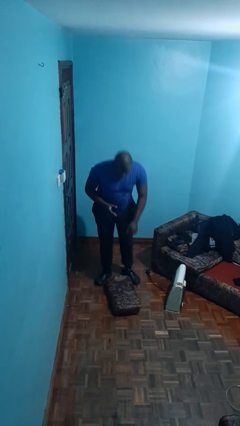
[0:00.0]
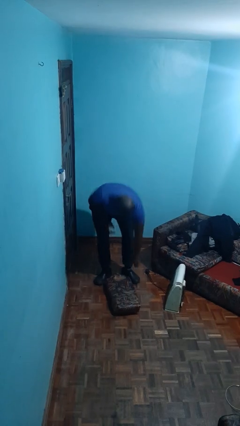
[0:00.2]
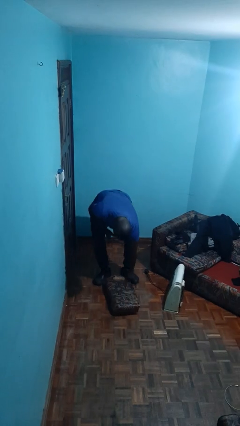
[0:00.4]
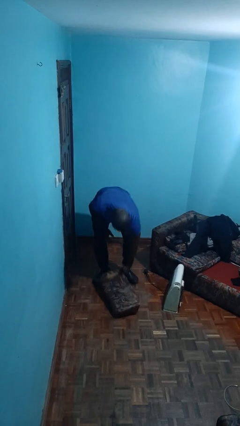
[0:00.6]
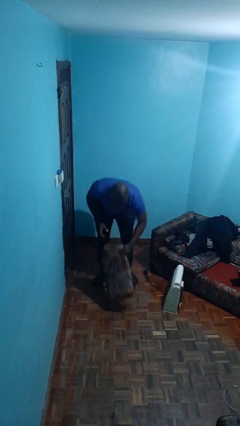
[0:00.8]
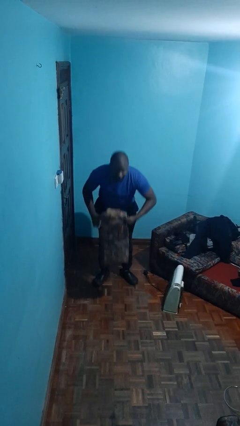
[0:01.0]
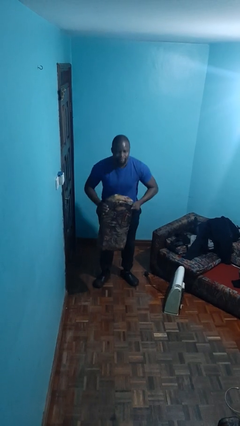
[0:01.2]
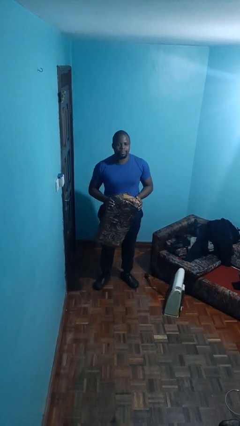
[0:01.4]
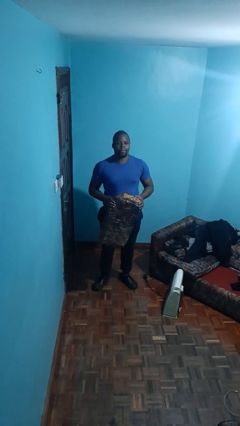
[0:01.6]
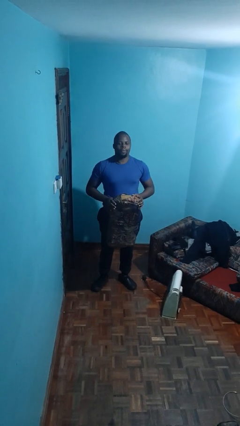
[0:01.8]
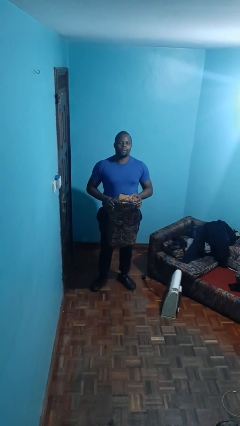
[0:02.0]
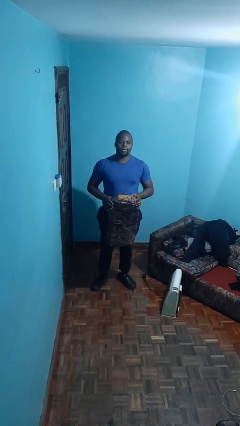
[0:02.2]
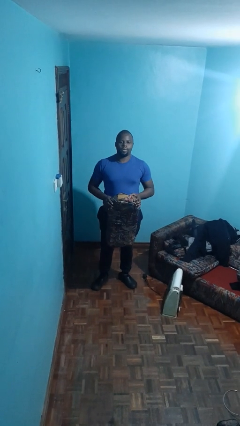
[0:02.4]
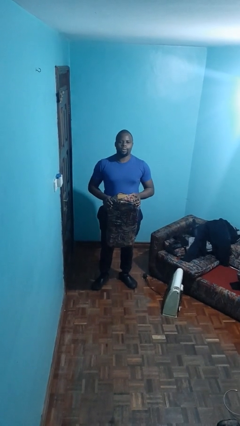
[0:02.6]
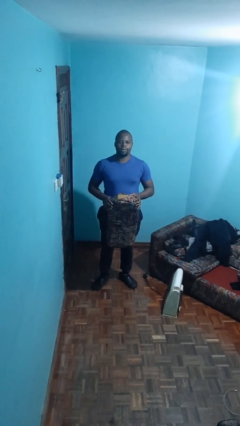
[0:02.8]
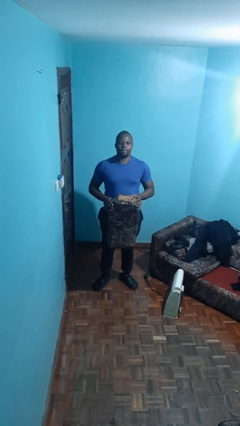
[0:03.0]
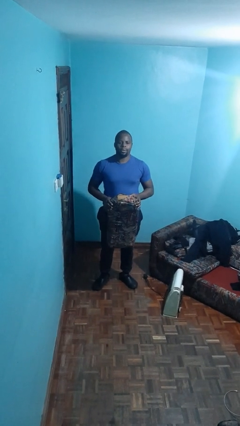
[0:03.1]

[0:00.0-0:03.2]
person picks up object from floor

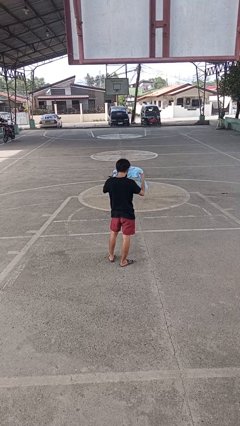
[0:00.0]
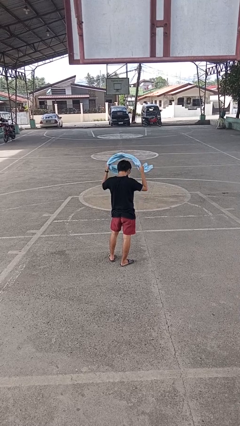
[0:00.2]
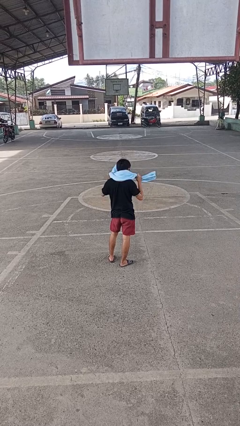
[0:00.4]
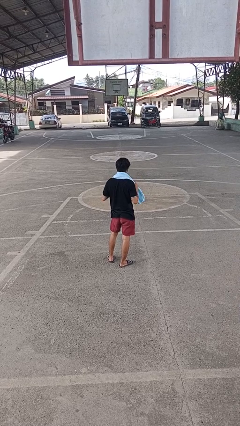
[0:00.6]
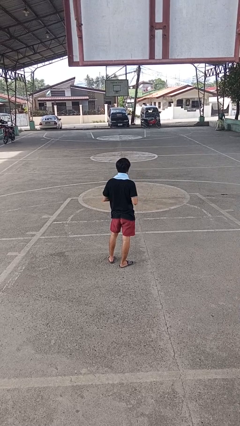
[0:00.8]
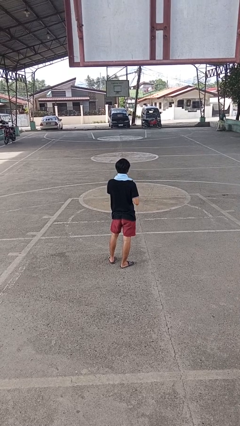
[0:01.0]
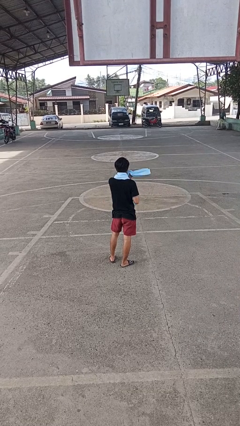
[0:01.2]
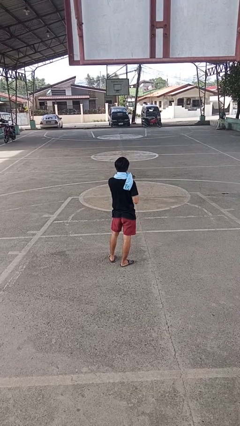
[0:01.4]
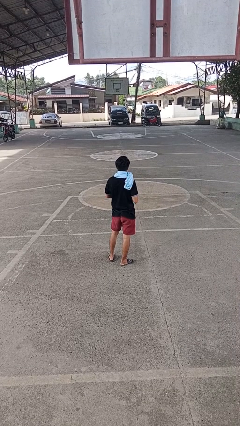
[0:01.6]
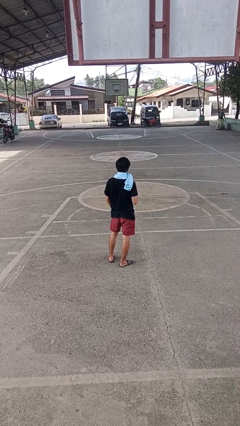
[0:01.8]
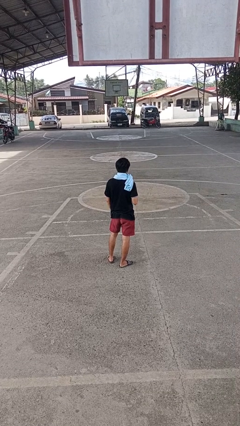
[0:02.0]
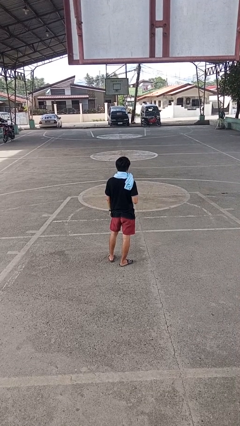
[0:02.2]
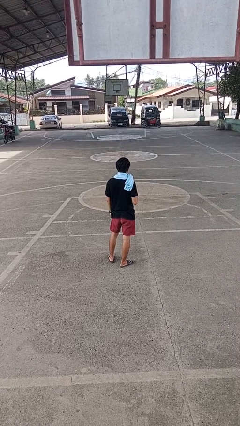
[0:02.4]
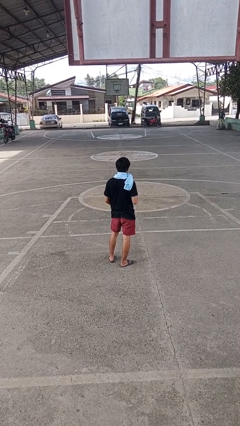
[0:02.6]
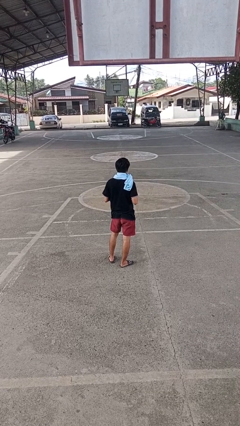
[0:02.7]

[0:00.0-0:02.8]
person puts on scarf

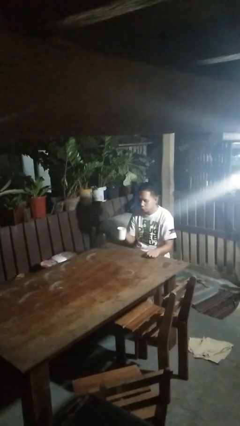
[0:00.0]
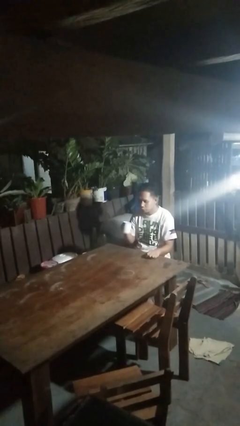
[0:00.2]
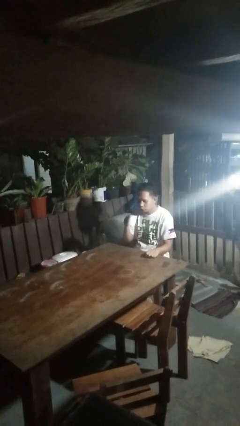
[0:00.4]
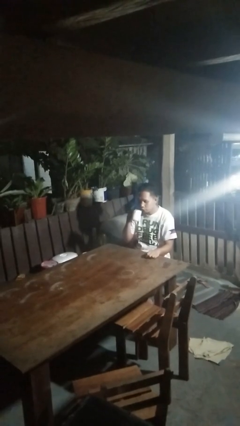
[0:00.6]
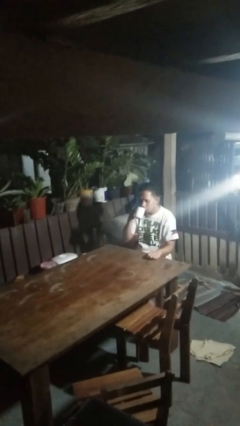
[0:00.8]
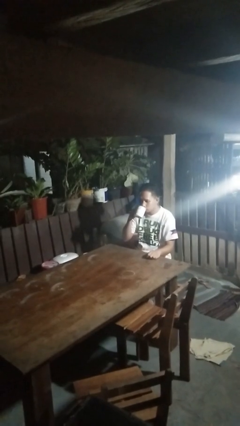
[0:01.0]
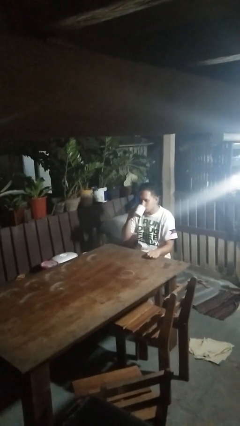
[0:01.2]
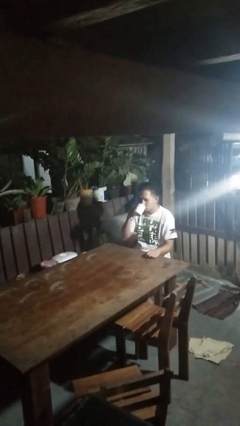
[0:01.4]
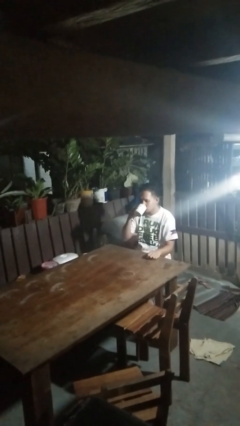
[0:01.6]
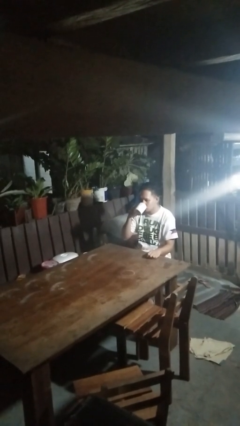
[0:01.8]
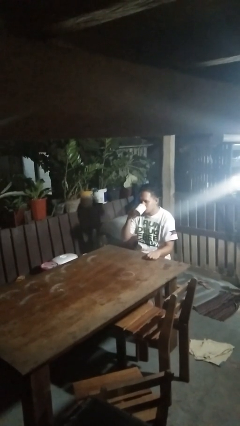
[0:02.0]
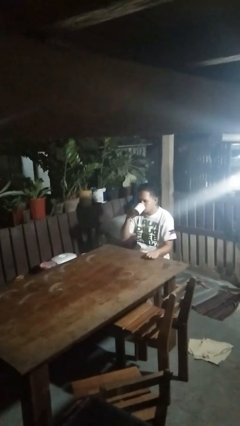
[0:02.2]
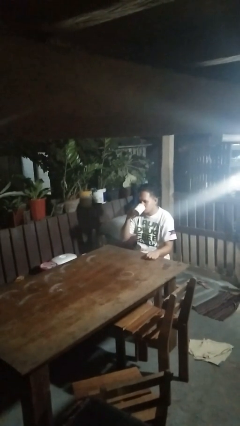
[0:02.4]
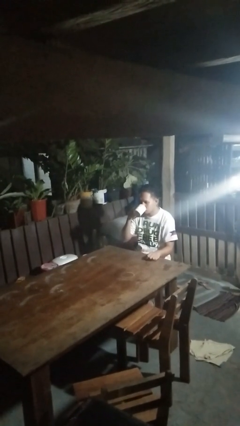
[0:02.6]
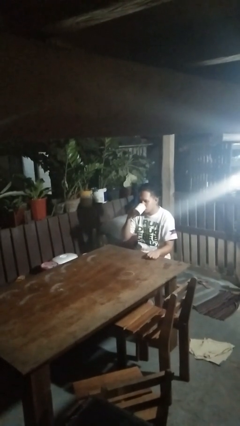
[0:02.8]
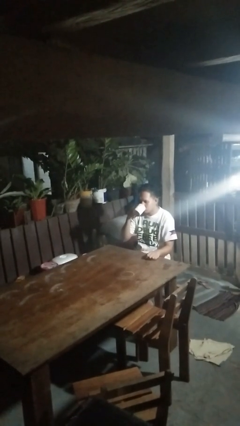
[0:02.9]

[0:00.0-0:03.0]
person drinks from mug

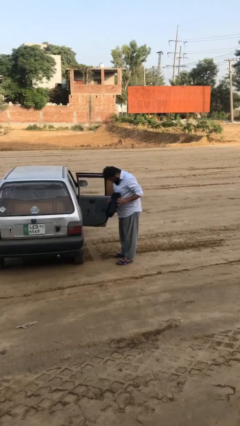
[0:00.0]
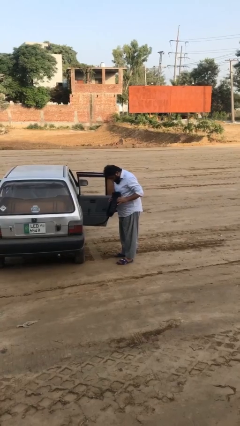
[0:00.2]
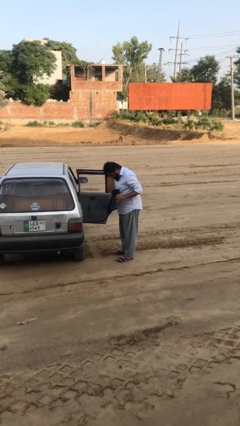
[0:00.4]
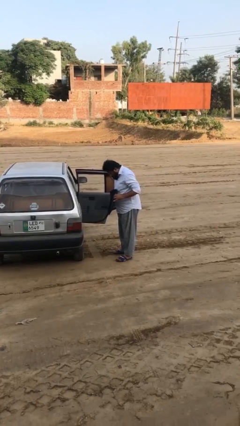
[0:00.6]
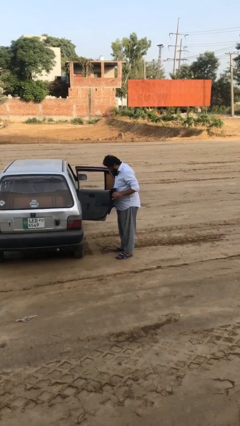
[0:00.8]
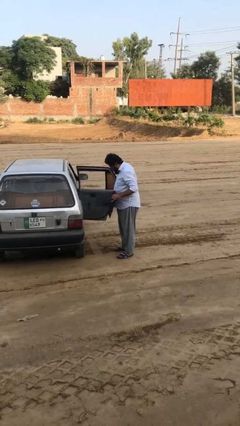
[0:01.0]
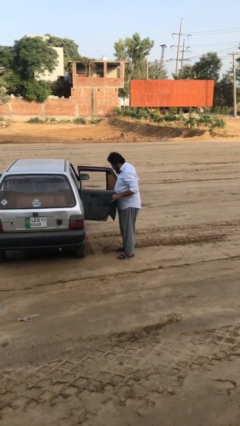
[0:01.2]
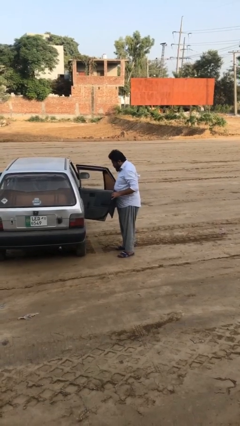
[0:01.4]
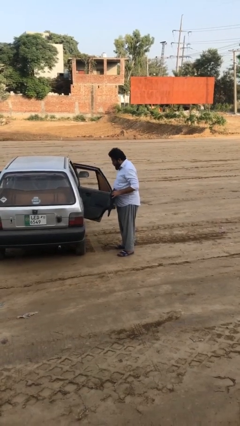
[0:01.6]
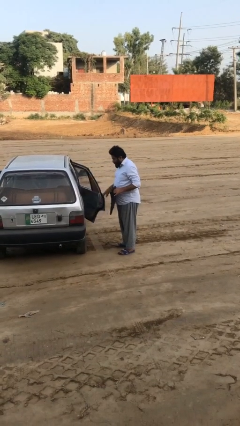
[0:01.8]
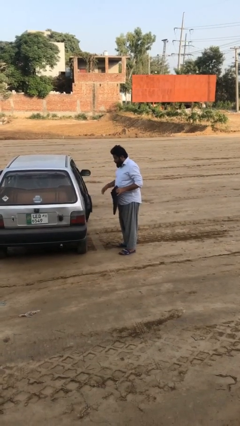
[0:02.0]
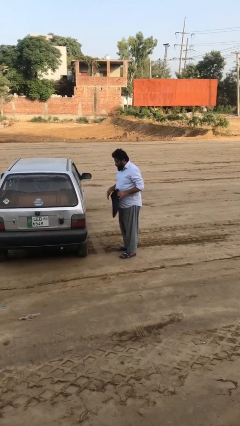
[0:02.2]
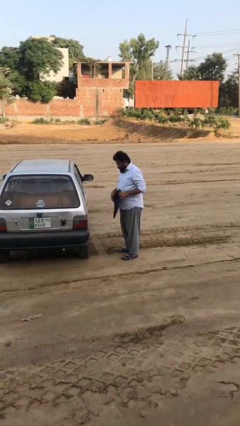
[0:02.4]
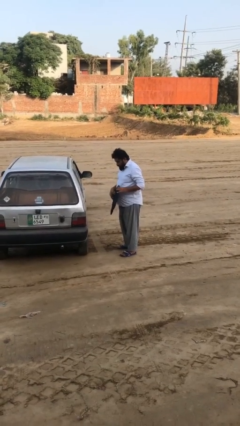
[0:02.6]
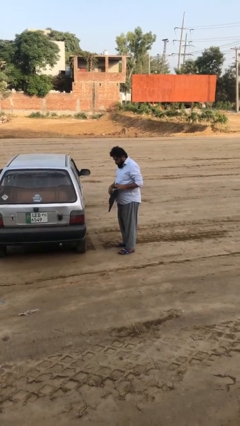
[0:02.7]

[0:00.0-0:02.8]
person closes car door

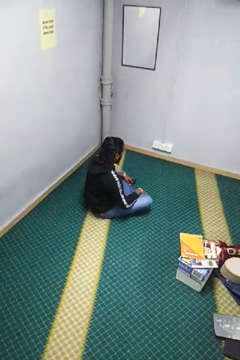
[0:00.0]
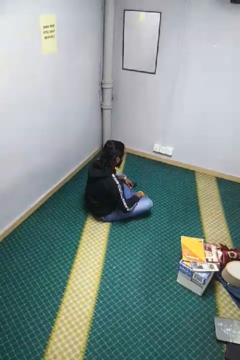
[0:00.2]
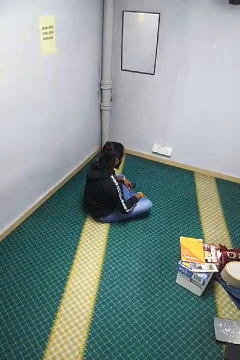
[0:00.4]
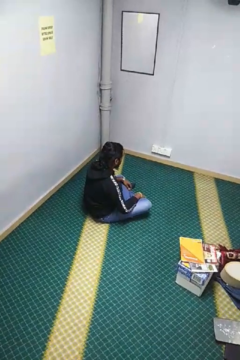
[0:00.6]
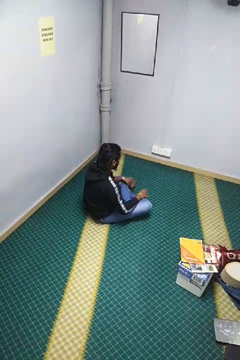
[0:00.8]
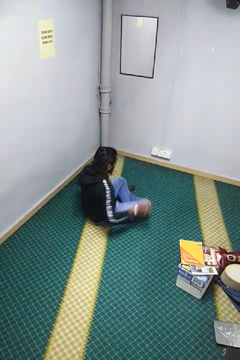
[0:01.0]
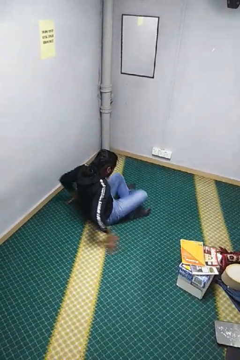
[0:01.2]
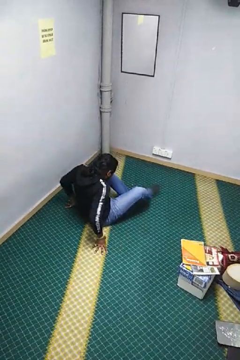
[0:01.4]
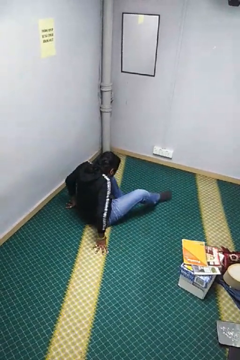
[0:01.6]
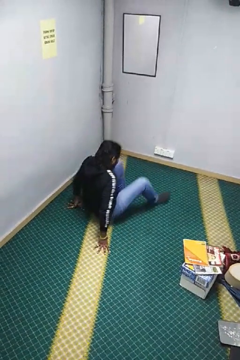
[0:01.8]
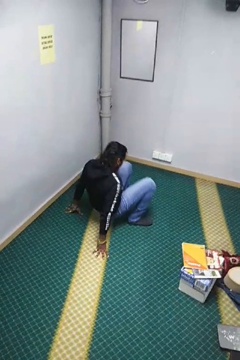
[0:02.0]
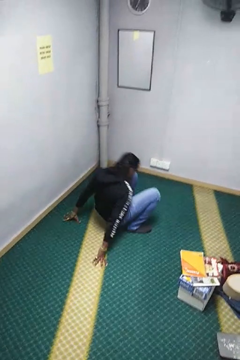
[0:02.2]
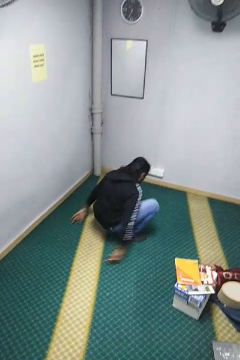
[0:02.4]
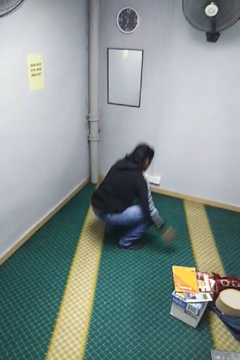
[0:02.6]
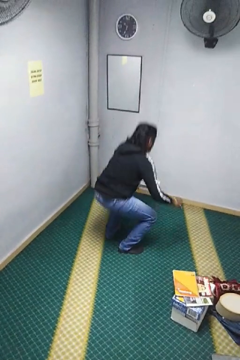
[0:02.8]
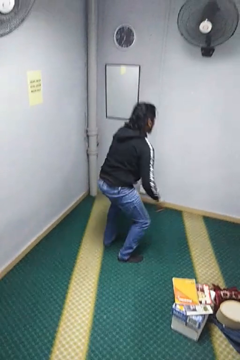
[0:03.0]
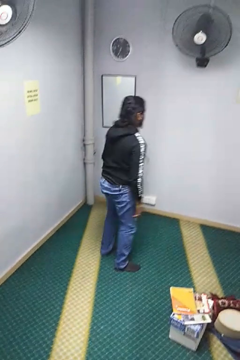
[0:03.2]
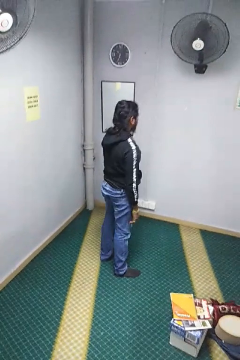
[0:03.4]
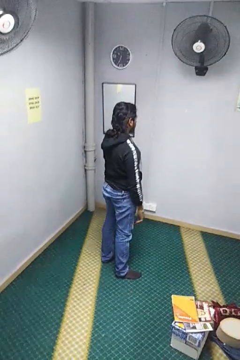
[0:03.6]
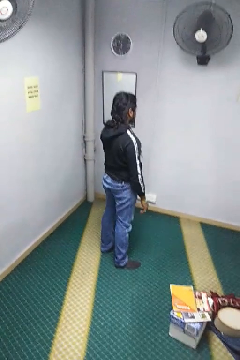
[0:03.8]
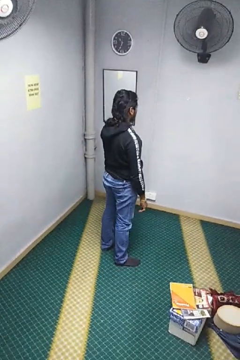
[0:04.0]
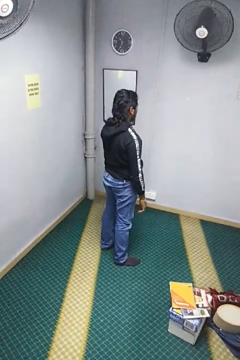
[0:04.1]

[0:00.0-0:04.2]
person stands up from floor

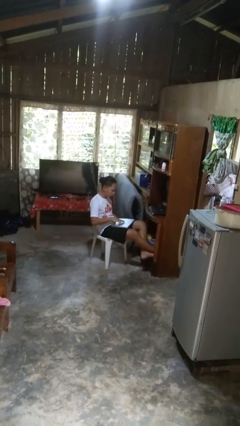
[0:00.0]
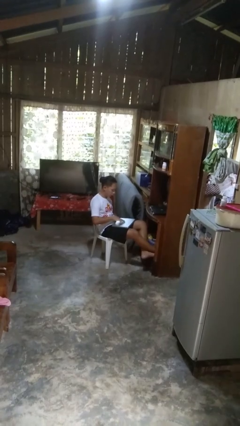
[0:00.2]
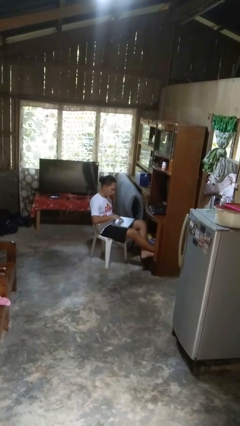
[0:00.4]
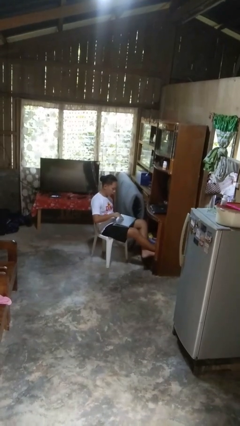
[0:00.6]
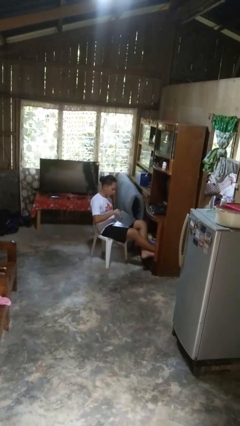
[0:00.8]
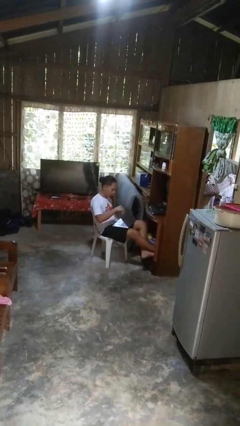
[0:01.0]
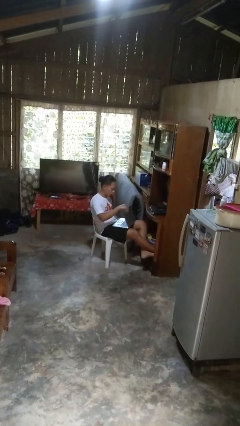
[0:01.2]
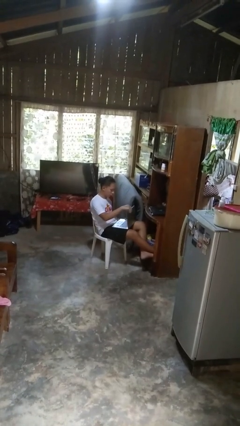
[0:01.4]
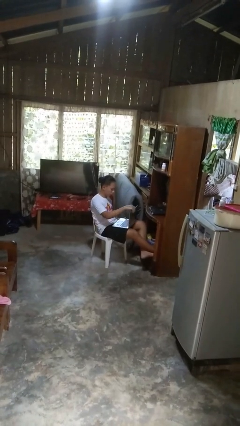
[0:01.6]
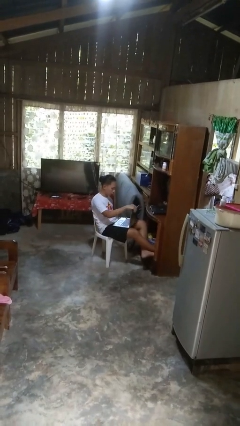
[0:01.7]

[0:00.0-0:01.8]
person opens laptop

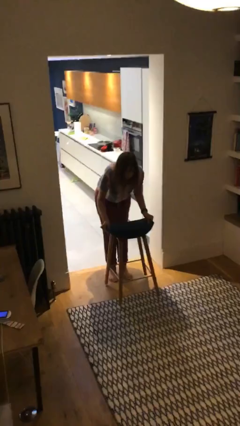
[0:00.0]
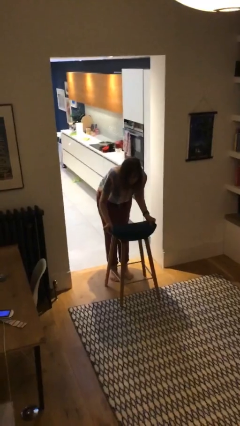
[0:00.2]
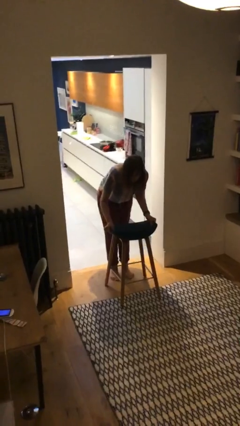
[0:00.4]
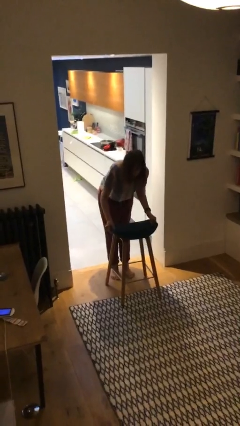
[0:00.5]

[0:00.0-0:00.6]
person puts down object on floor
